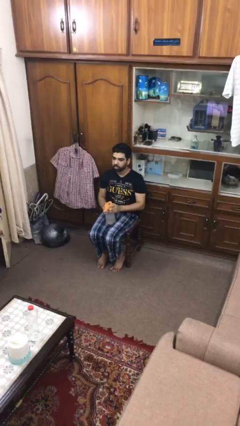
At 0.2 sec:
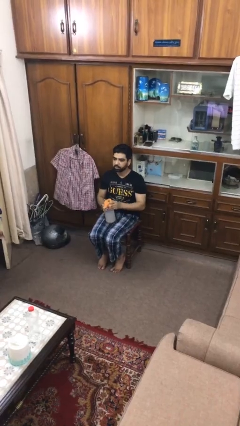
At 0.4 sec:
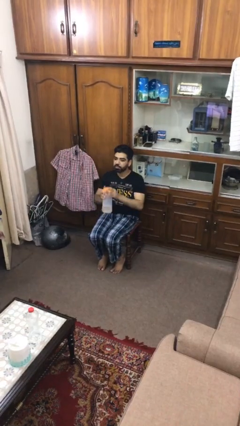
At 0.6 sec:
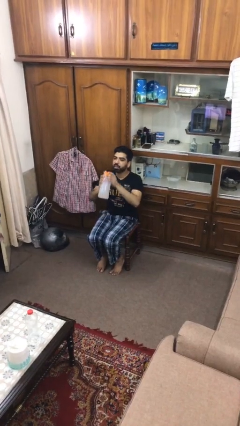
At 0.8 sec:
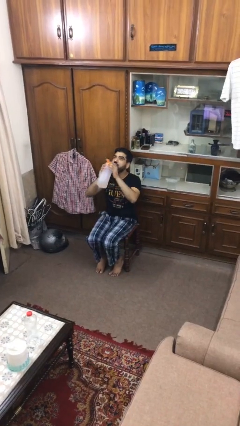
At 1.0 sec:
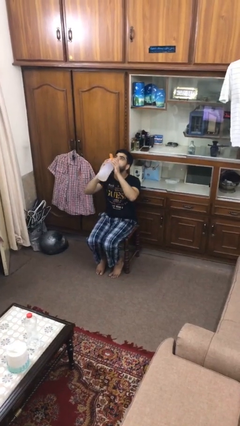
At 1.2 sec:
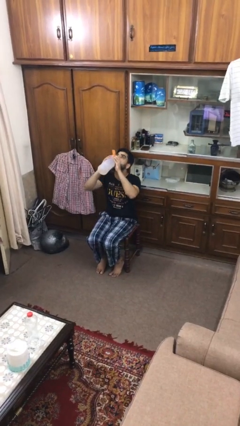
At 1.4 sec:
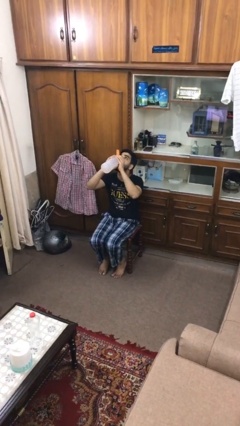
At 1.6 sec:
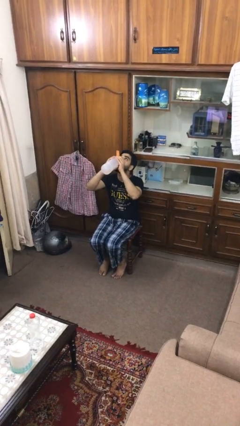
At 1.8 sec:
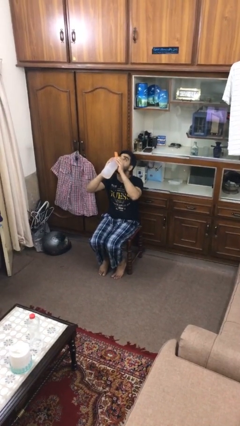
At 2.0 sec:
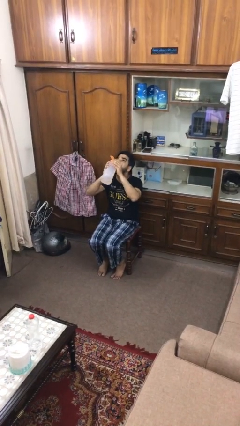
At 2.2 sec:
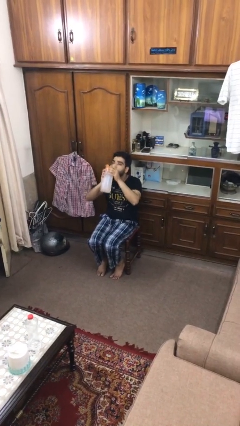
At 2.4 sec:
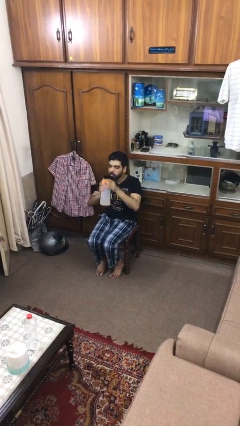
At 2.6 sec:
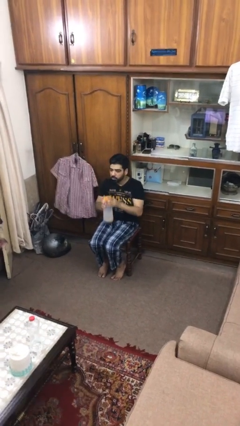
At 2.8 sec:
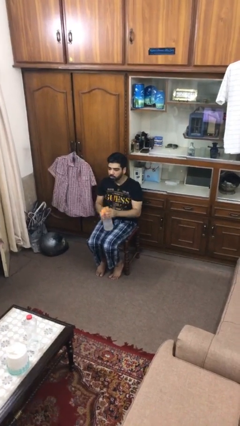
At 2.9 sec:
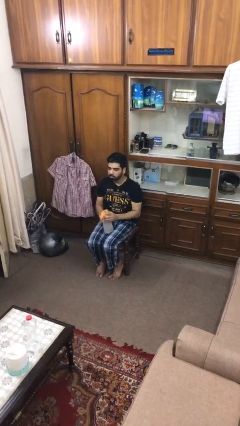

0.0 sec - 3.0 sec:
person drinks from bottle

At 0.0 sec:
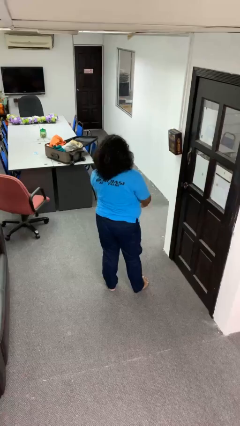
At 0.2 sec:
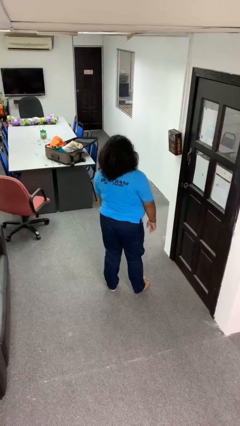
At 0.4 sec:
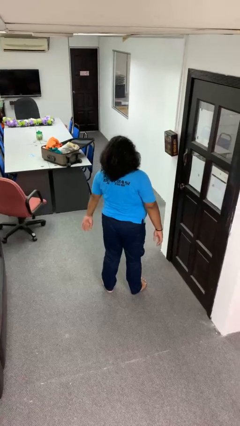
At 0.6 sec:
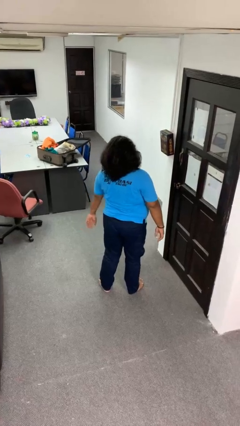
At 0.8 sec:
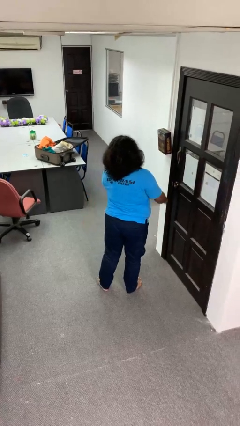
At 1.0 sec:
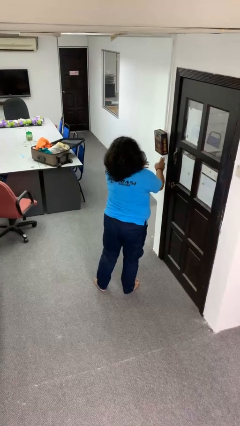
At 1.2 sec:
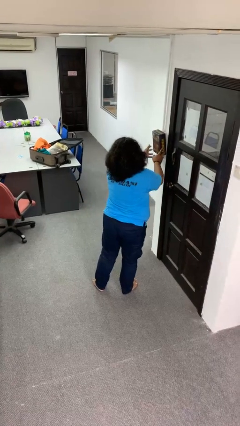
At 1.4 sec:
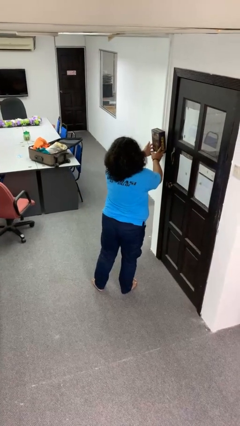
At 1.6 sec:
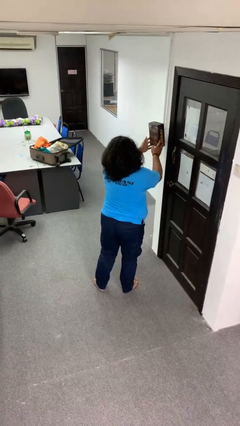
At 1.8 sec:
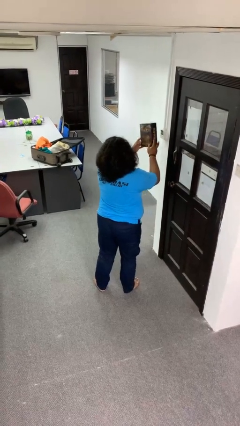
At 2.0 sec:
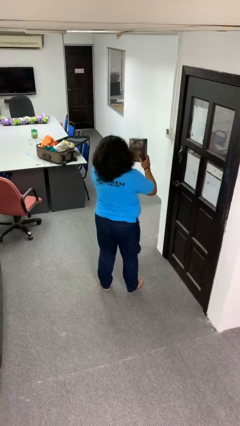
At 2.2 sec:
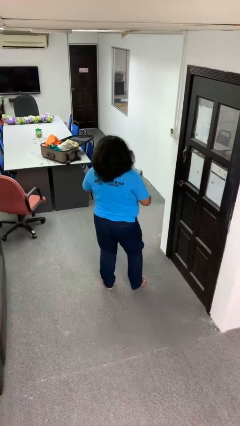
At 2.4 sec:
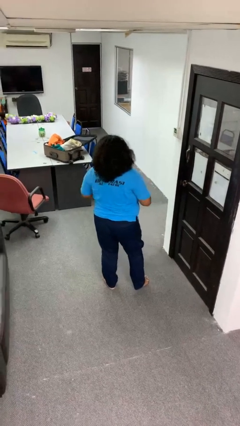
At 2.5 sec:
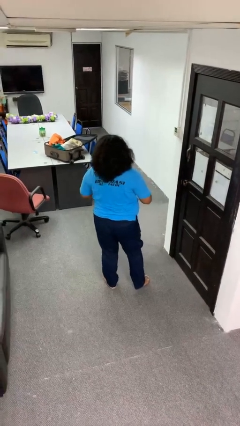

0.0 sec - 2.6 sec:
person takes down picture frame

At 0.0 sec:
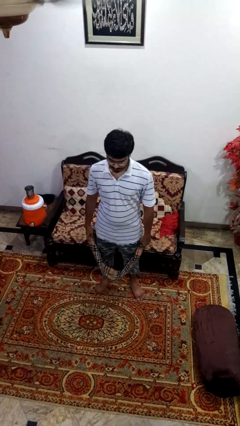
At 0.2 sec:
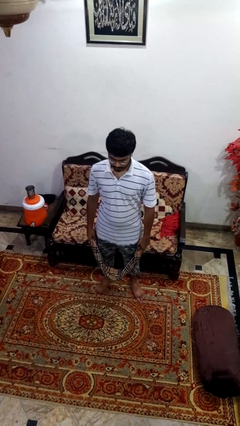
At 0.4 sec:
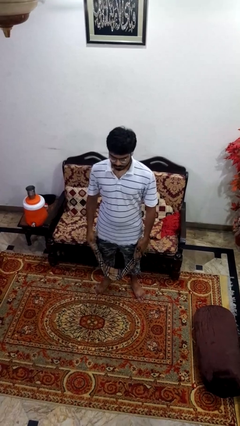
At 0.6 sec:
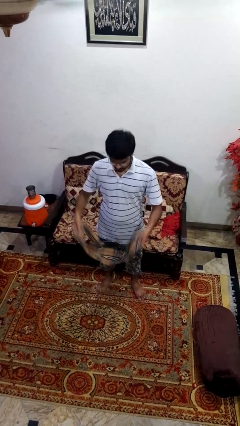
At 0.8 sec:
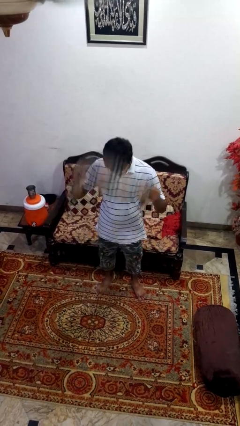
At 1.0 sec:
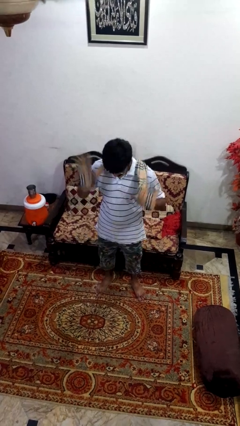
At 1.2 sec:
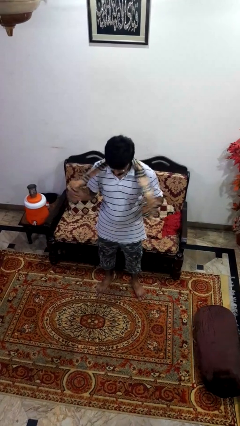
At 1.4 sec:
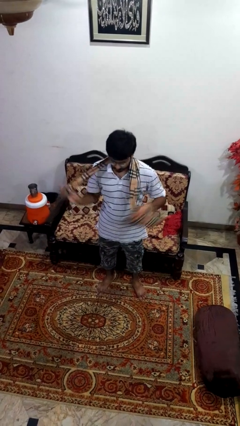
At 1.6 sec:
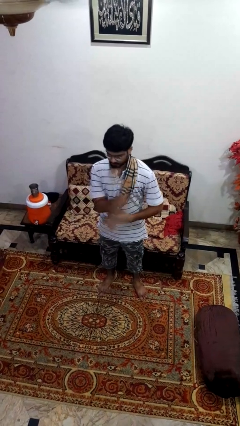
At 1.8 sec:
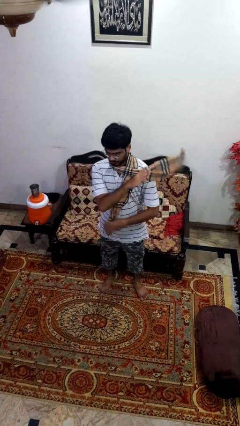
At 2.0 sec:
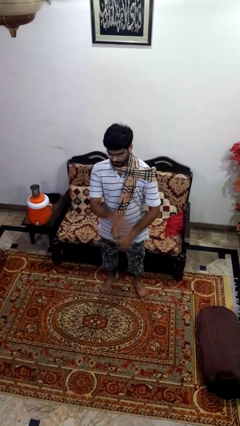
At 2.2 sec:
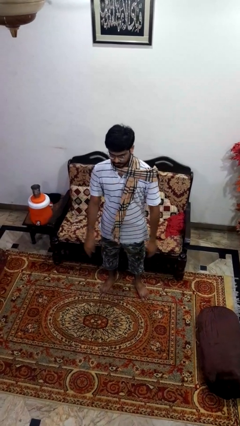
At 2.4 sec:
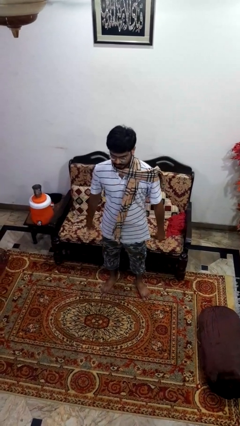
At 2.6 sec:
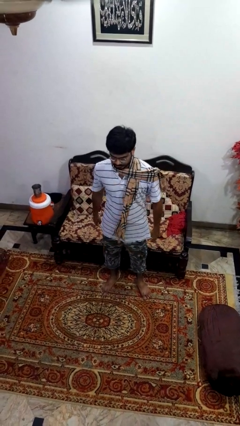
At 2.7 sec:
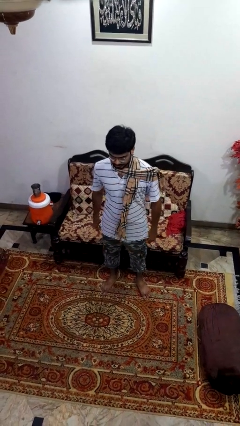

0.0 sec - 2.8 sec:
person puts on scarf

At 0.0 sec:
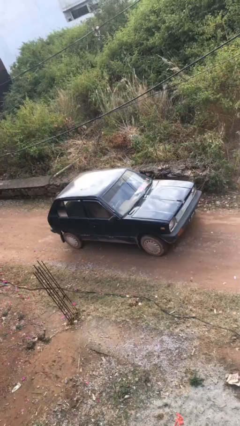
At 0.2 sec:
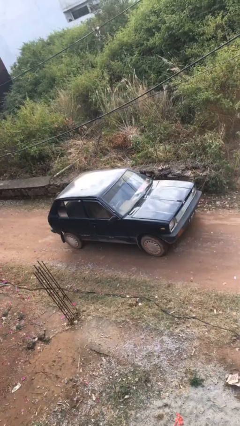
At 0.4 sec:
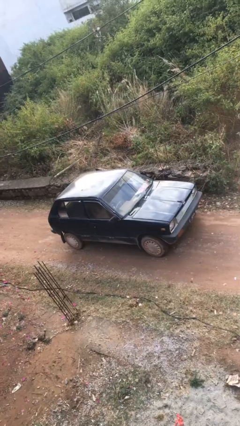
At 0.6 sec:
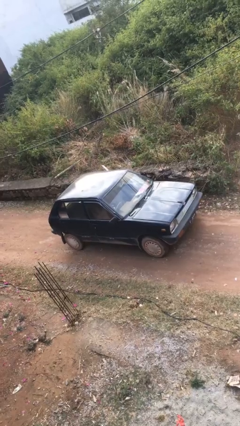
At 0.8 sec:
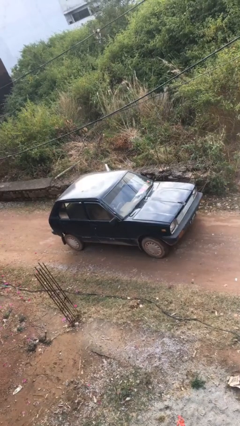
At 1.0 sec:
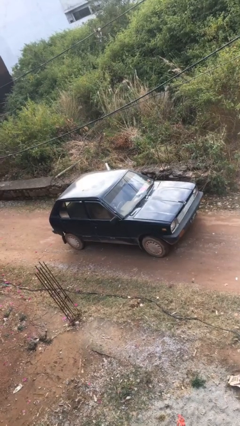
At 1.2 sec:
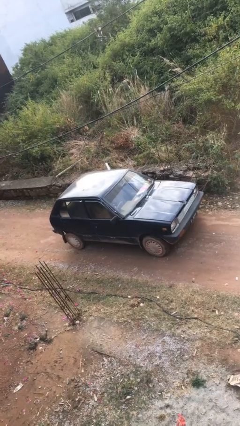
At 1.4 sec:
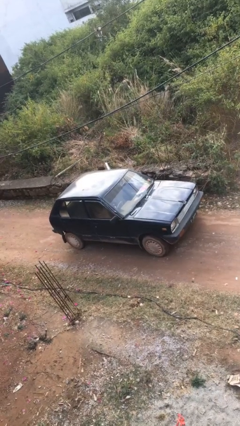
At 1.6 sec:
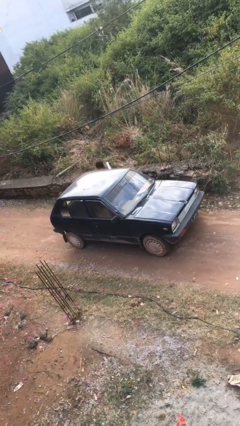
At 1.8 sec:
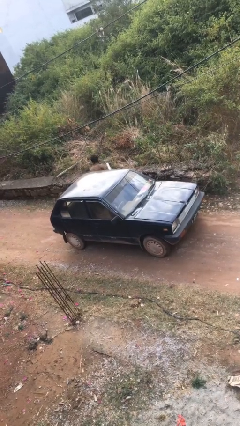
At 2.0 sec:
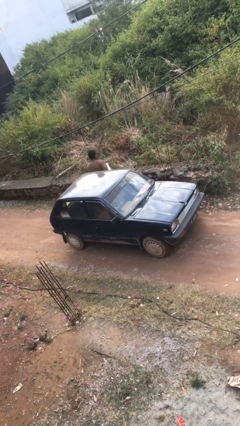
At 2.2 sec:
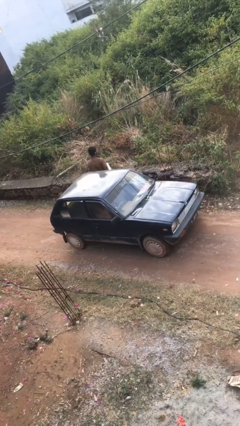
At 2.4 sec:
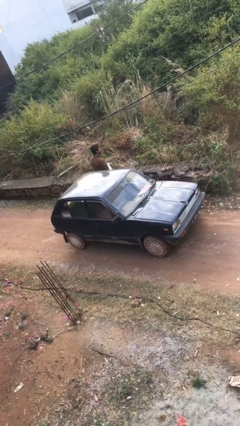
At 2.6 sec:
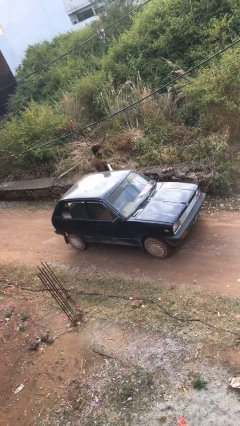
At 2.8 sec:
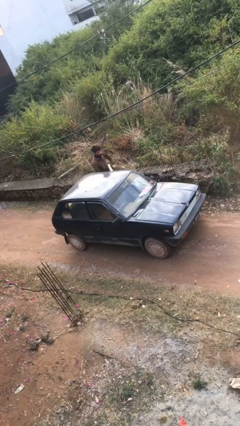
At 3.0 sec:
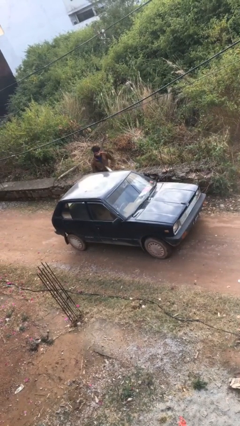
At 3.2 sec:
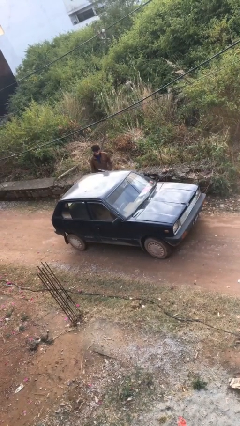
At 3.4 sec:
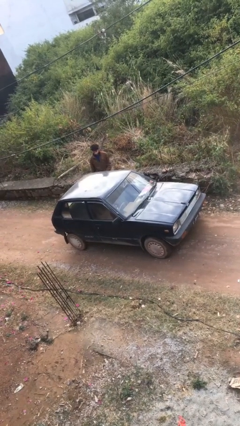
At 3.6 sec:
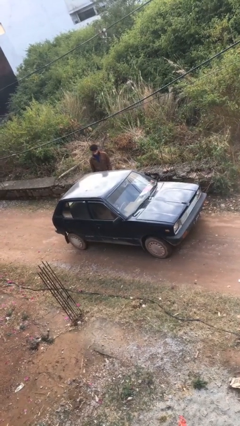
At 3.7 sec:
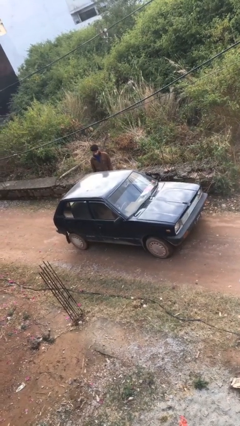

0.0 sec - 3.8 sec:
car drops off person

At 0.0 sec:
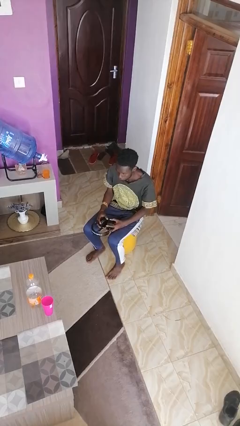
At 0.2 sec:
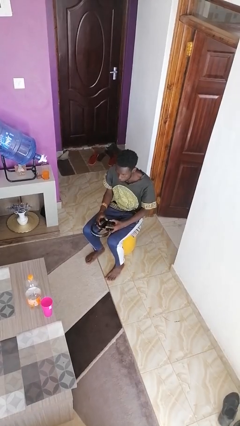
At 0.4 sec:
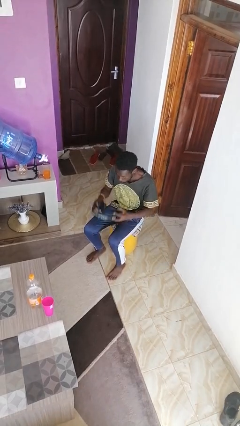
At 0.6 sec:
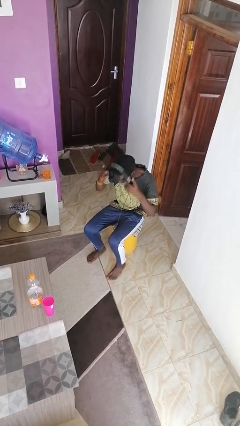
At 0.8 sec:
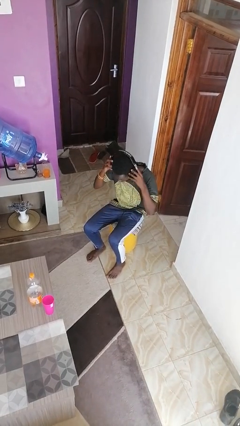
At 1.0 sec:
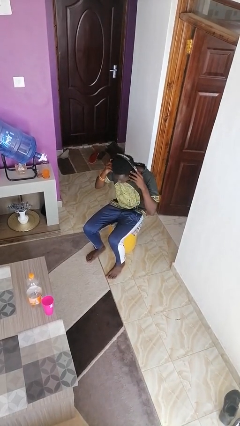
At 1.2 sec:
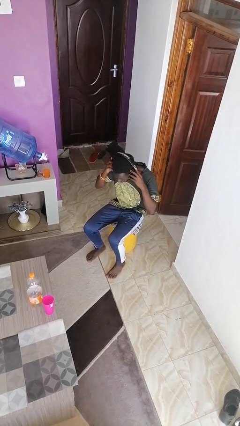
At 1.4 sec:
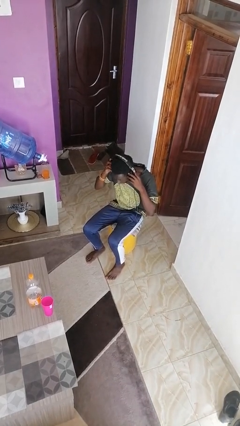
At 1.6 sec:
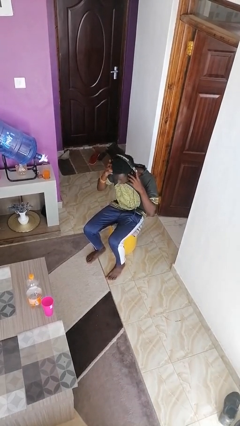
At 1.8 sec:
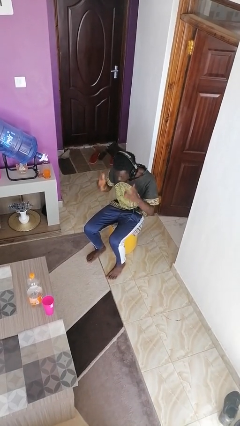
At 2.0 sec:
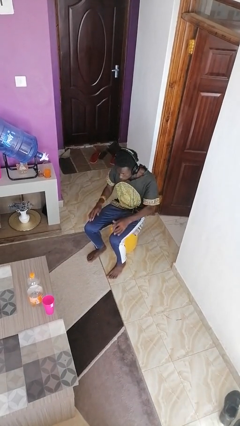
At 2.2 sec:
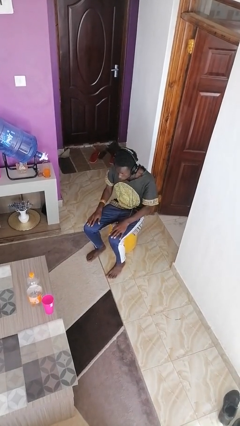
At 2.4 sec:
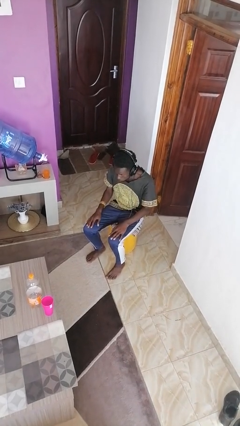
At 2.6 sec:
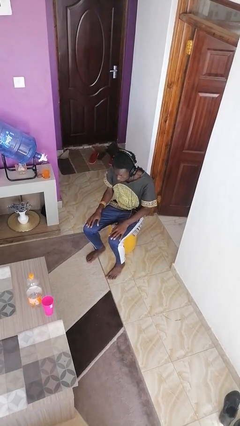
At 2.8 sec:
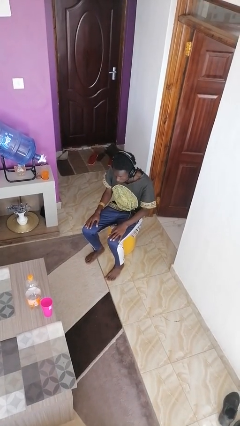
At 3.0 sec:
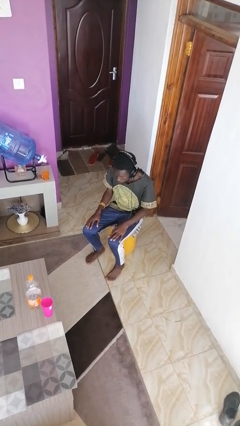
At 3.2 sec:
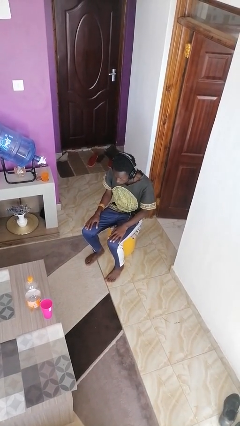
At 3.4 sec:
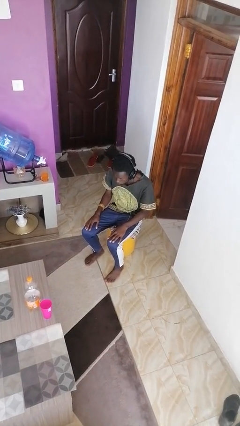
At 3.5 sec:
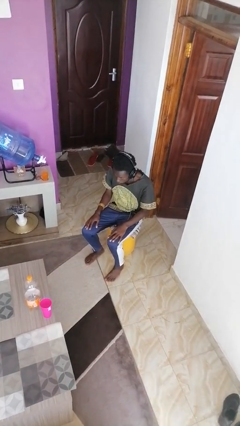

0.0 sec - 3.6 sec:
person puts on headphones

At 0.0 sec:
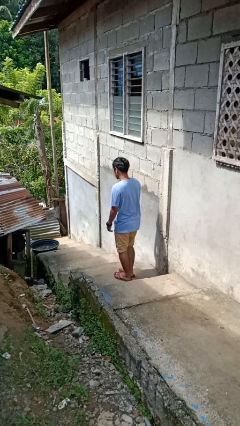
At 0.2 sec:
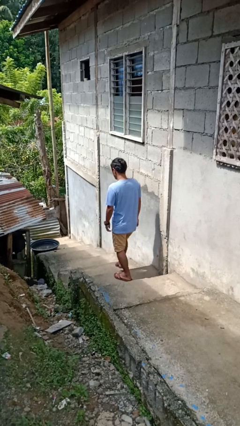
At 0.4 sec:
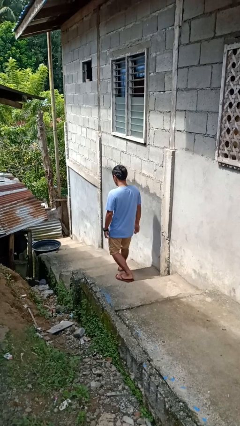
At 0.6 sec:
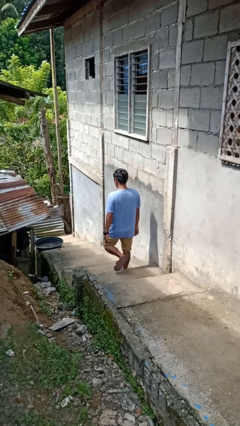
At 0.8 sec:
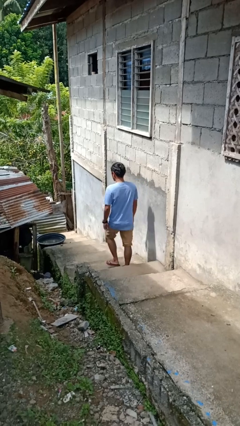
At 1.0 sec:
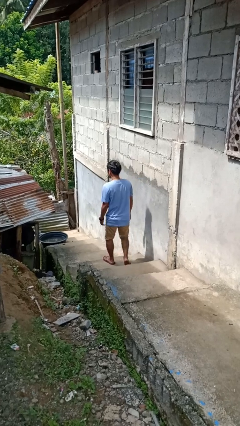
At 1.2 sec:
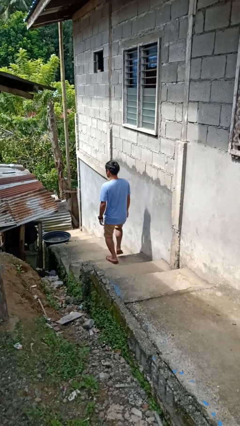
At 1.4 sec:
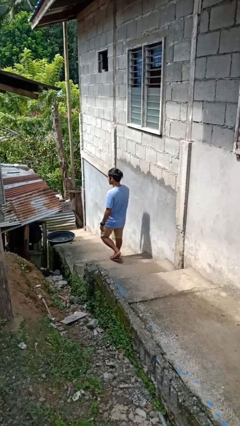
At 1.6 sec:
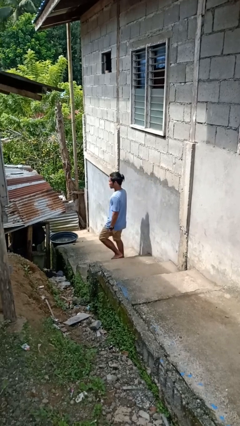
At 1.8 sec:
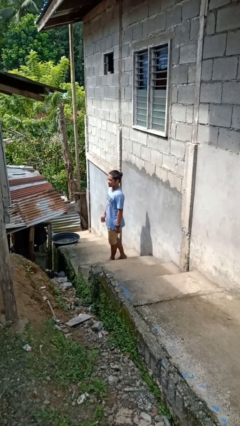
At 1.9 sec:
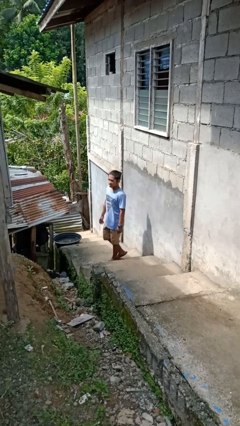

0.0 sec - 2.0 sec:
person climbs down stairs
